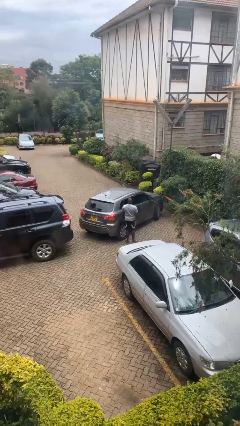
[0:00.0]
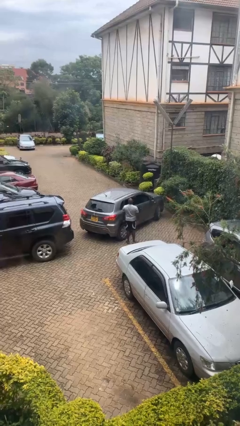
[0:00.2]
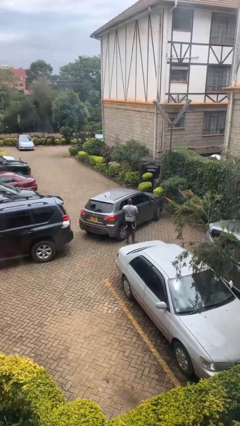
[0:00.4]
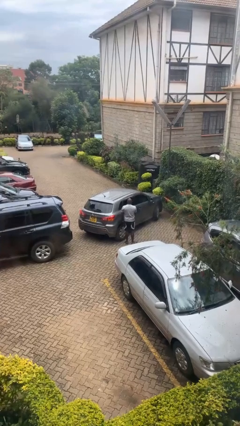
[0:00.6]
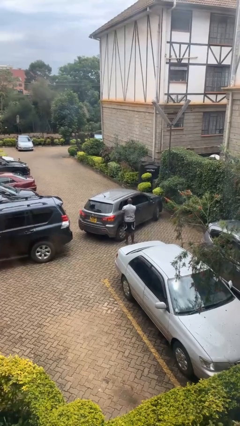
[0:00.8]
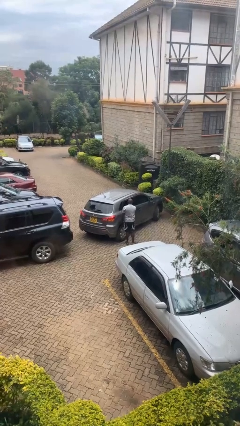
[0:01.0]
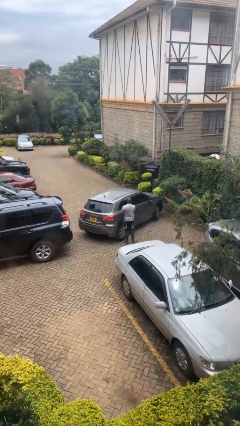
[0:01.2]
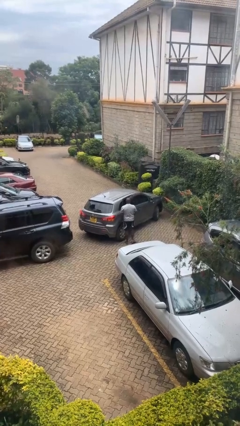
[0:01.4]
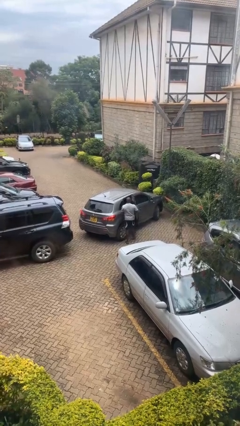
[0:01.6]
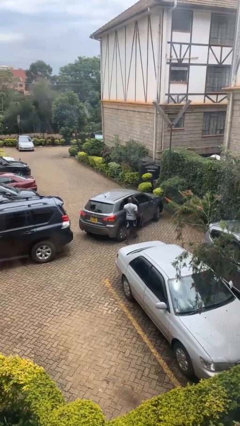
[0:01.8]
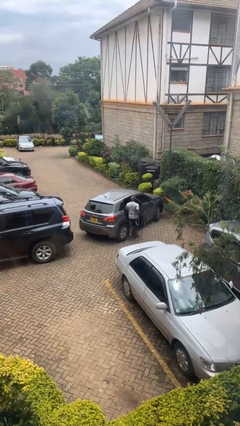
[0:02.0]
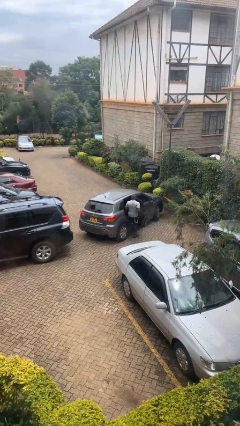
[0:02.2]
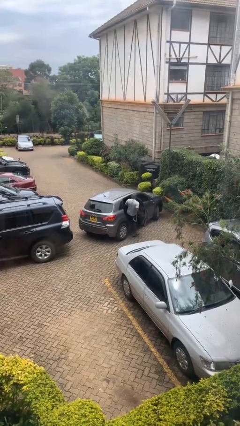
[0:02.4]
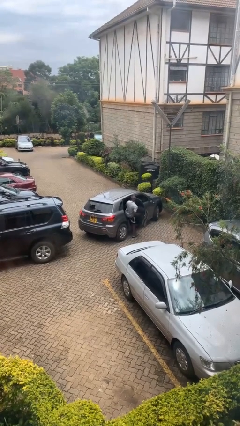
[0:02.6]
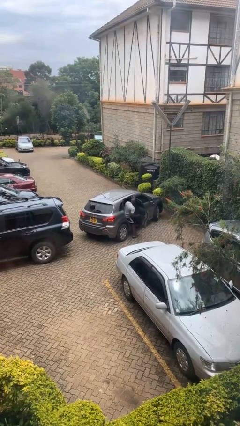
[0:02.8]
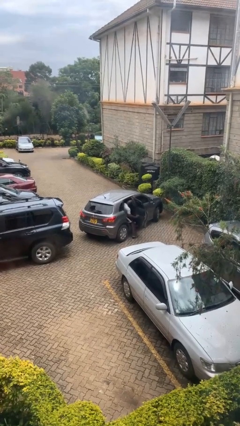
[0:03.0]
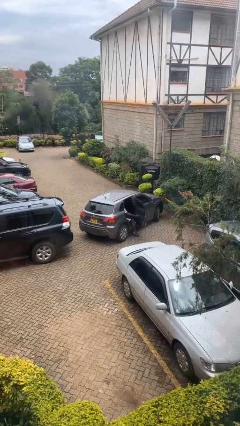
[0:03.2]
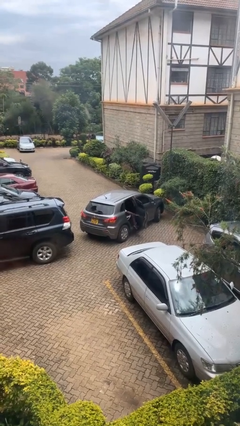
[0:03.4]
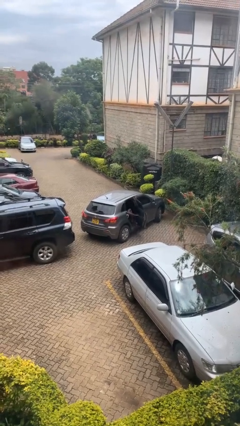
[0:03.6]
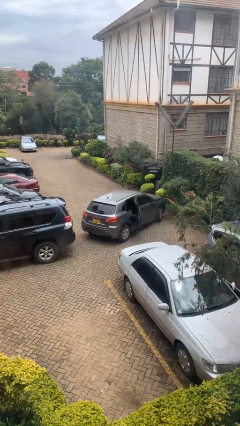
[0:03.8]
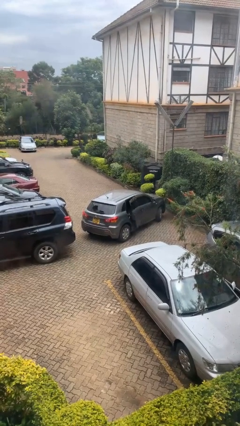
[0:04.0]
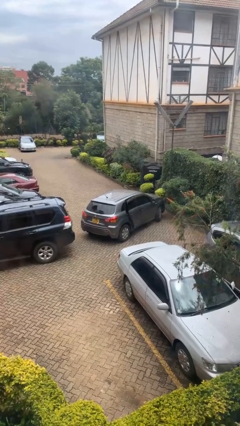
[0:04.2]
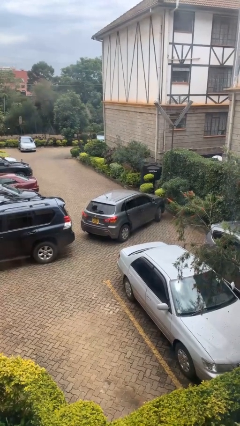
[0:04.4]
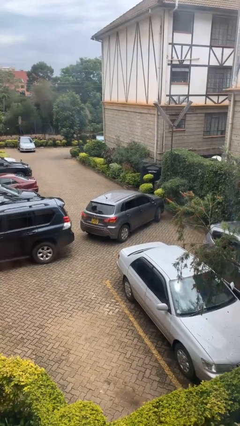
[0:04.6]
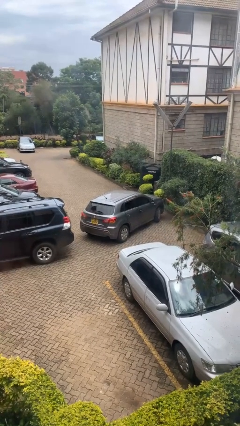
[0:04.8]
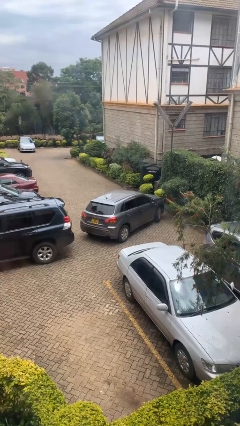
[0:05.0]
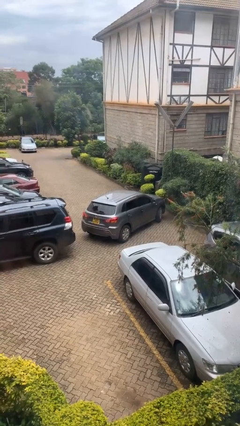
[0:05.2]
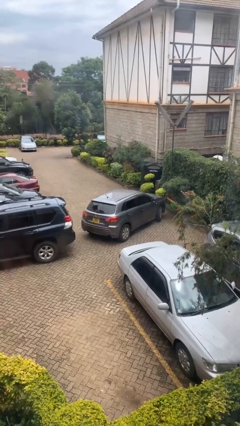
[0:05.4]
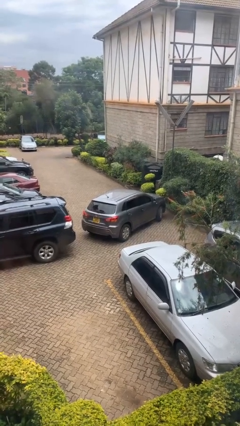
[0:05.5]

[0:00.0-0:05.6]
car picks up person

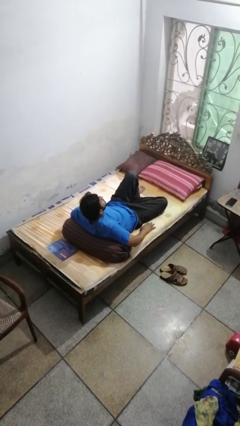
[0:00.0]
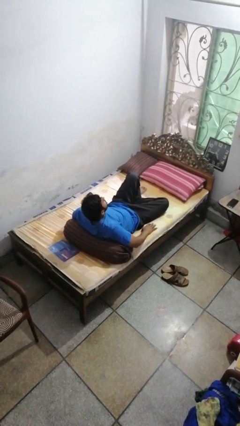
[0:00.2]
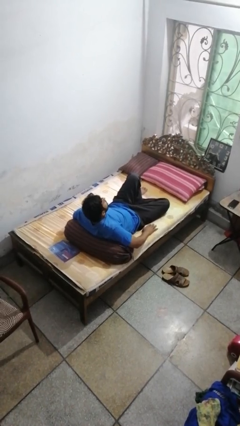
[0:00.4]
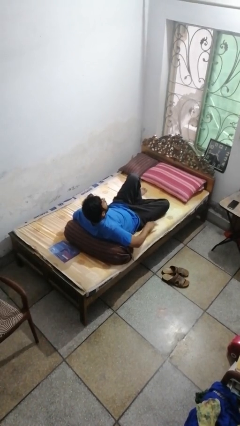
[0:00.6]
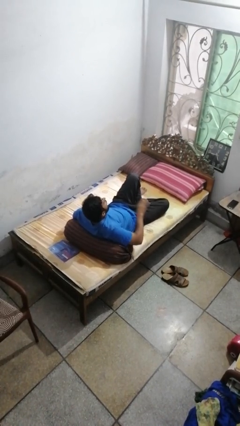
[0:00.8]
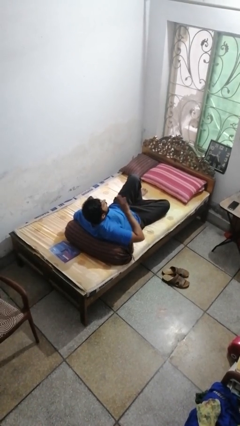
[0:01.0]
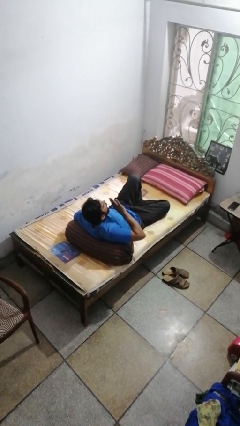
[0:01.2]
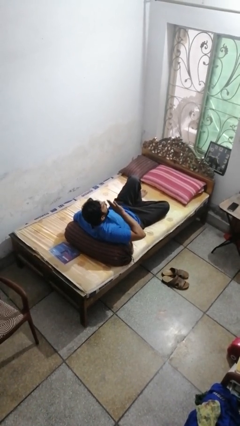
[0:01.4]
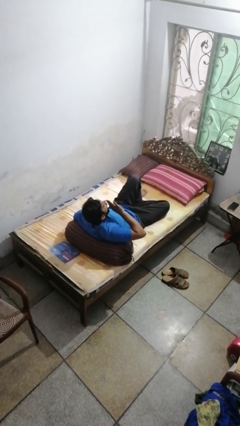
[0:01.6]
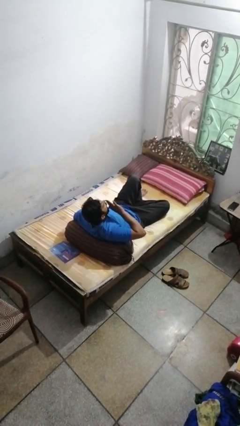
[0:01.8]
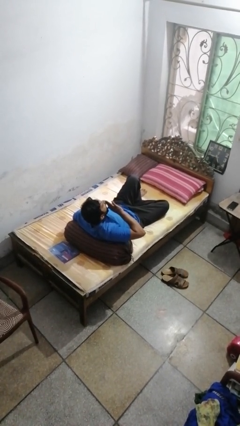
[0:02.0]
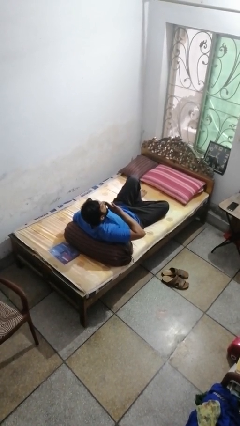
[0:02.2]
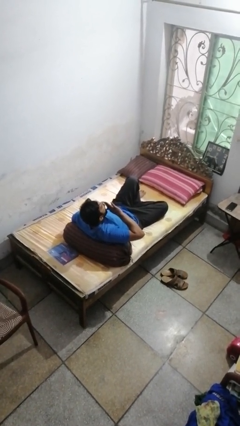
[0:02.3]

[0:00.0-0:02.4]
person yawns

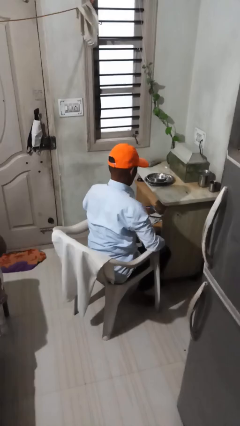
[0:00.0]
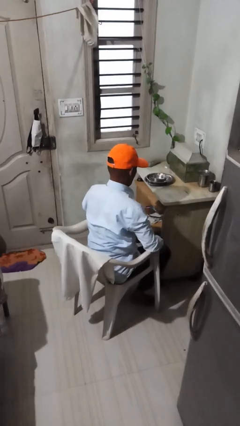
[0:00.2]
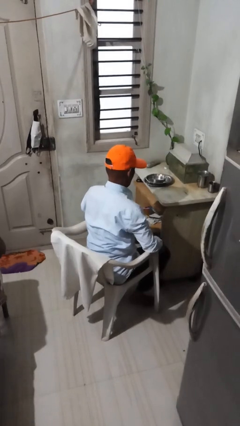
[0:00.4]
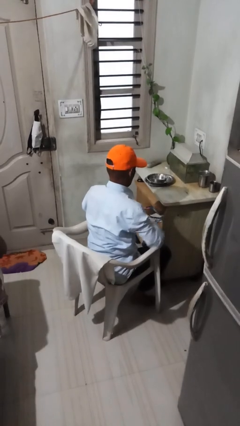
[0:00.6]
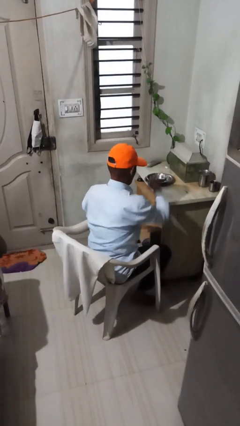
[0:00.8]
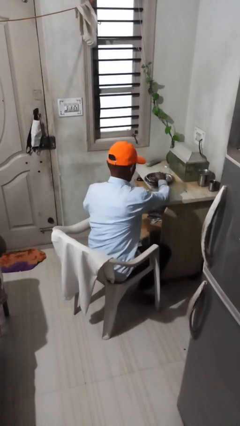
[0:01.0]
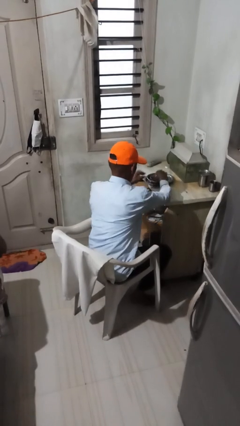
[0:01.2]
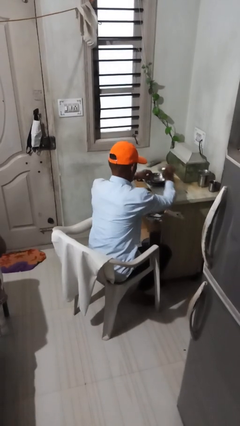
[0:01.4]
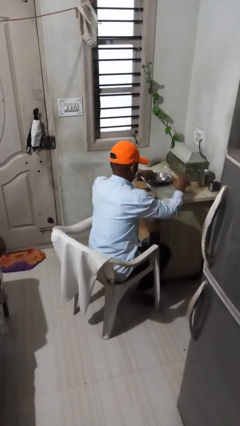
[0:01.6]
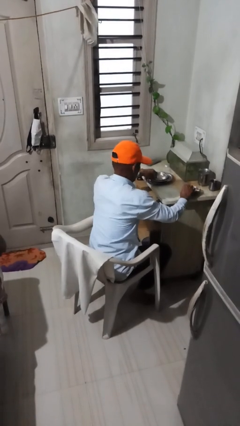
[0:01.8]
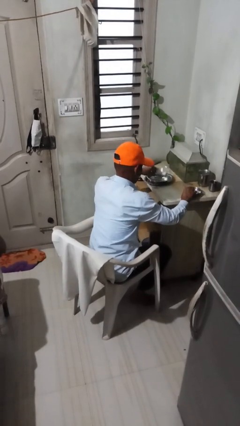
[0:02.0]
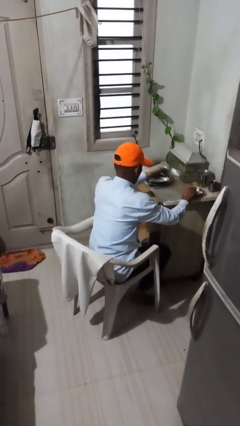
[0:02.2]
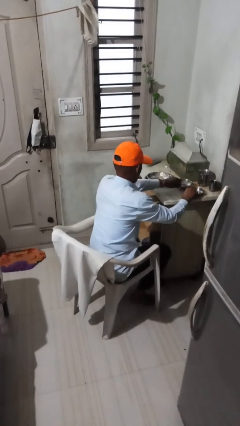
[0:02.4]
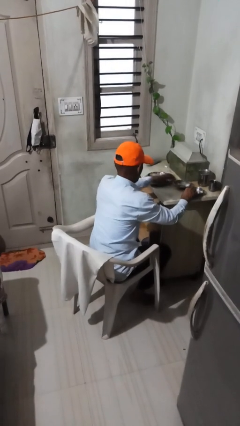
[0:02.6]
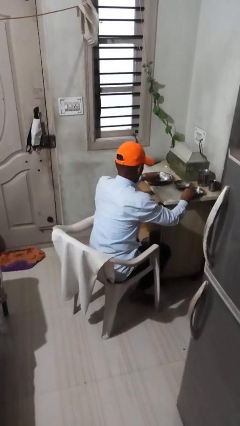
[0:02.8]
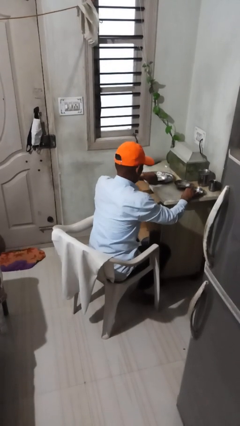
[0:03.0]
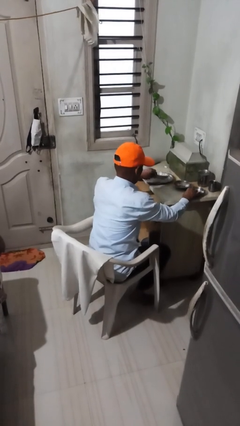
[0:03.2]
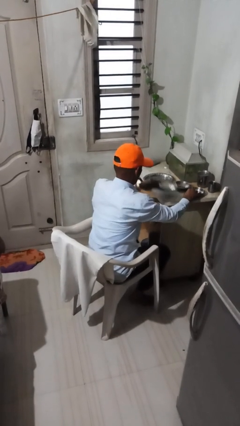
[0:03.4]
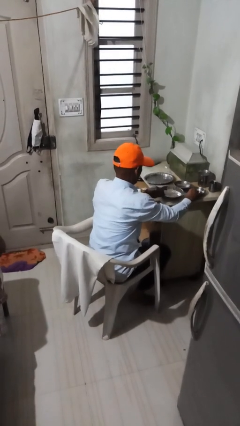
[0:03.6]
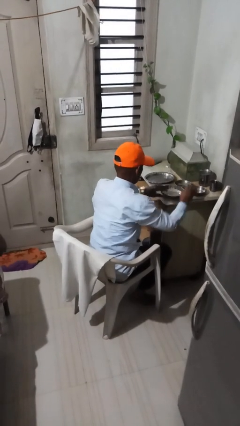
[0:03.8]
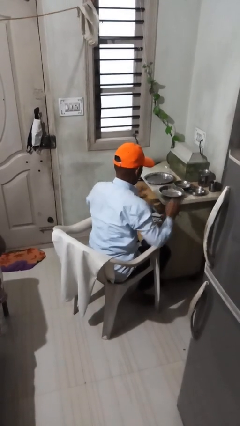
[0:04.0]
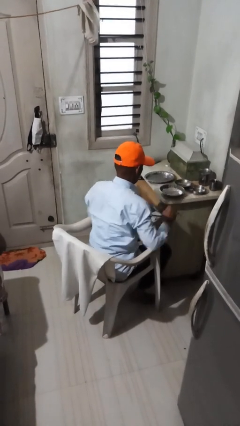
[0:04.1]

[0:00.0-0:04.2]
person sets table

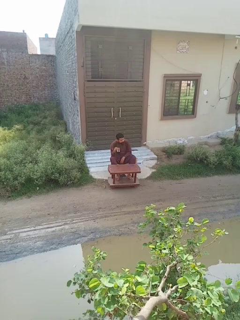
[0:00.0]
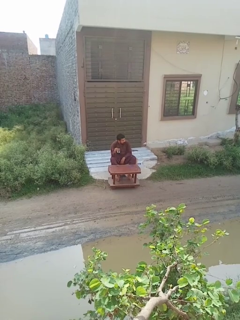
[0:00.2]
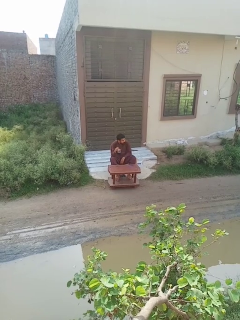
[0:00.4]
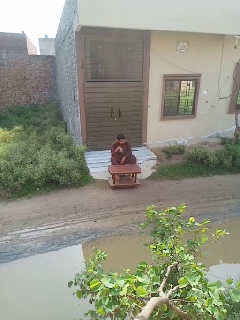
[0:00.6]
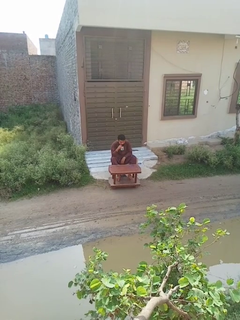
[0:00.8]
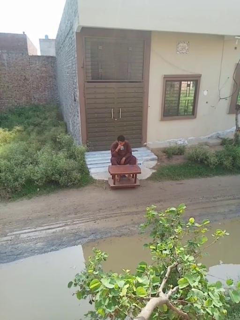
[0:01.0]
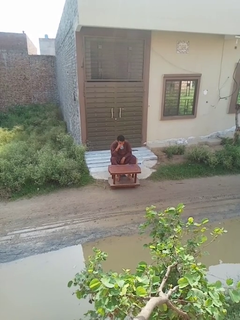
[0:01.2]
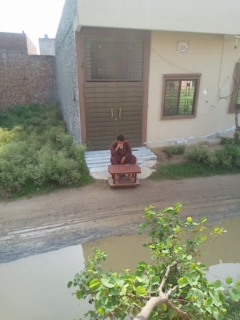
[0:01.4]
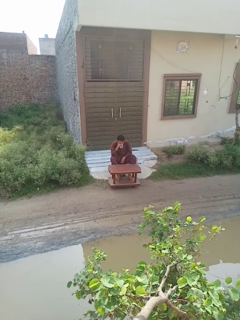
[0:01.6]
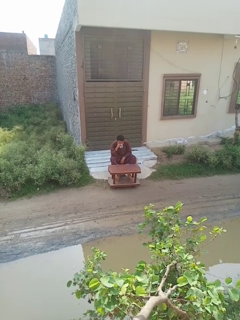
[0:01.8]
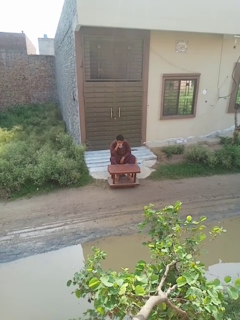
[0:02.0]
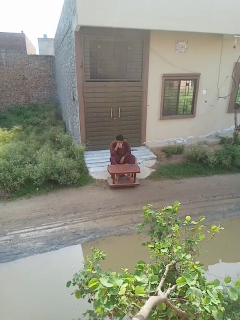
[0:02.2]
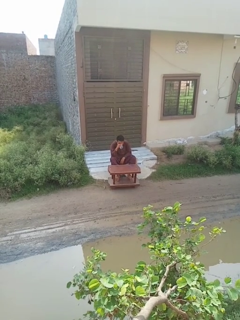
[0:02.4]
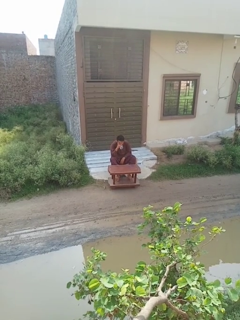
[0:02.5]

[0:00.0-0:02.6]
person drinks from mug

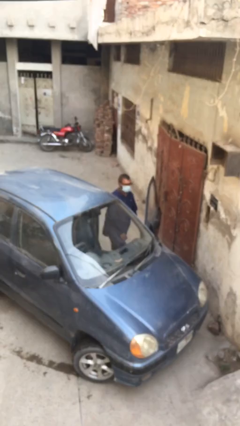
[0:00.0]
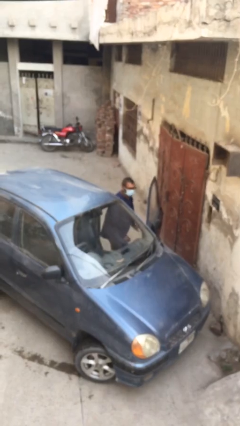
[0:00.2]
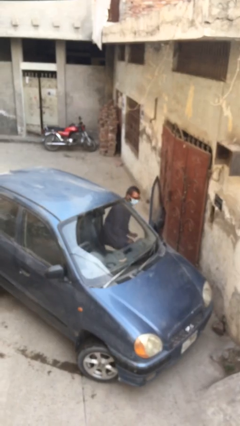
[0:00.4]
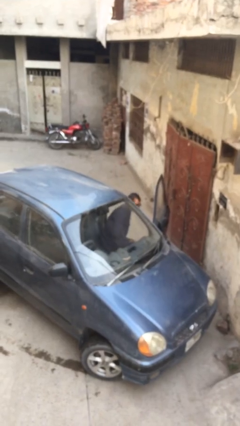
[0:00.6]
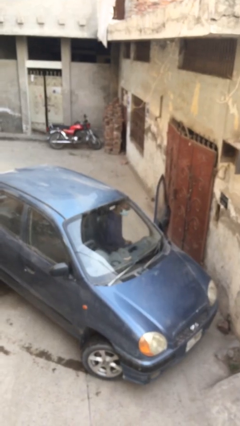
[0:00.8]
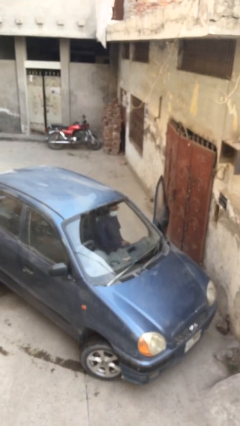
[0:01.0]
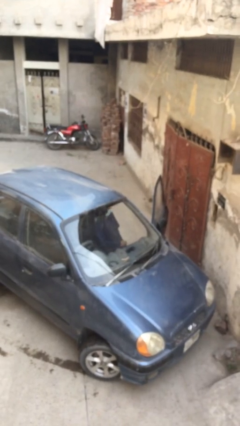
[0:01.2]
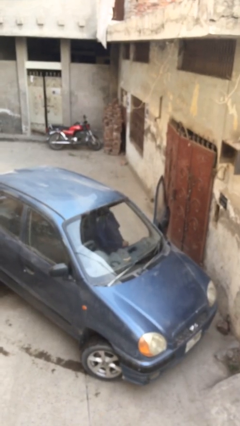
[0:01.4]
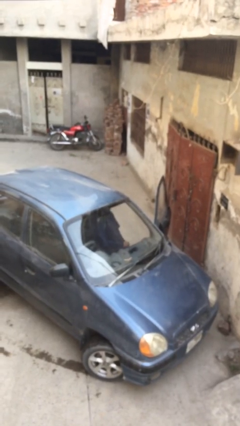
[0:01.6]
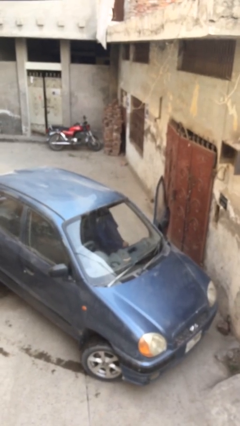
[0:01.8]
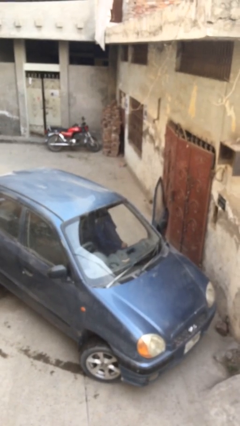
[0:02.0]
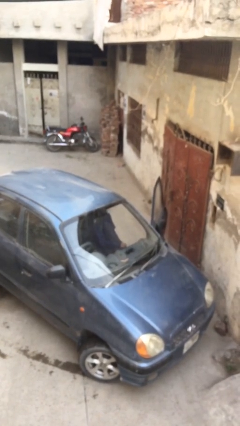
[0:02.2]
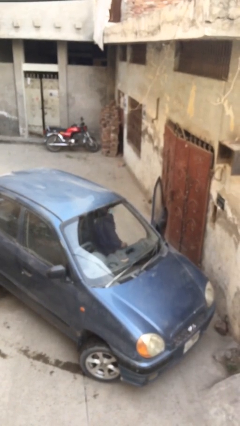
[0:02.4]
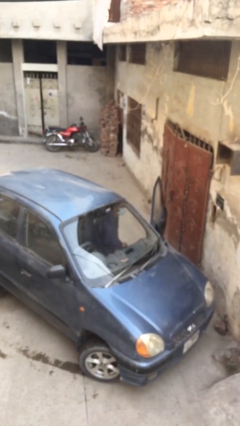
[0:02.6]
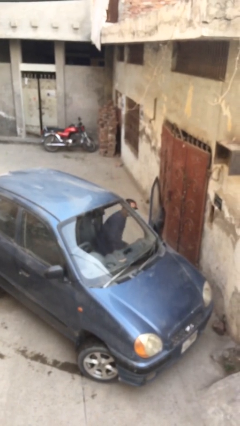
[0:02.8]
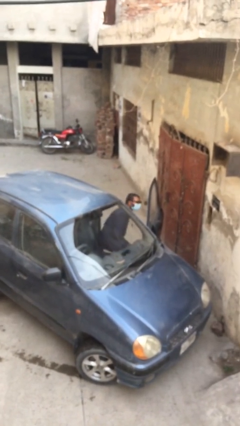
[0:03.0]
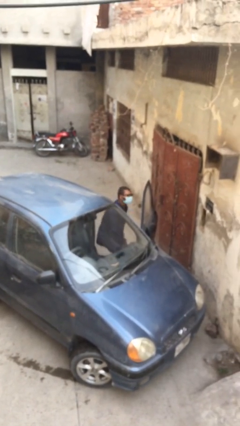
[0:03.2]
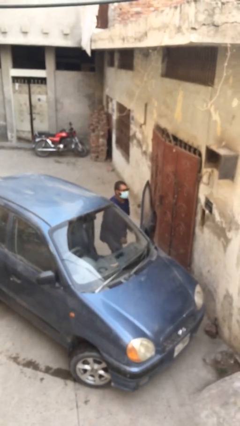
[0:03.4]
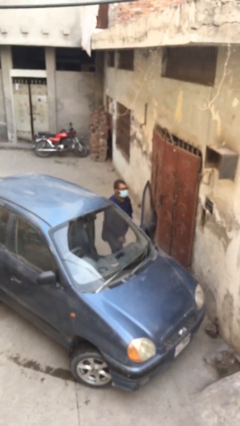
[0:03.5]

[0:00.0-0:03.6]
person enters car
